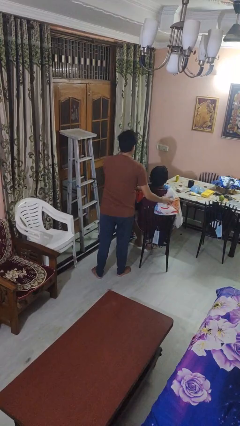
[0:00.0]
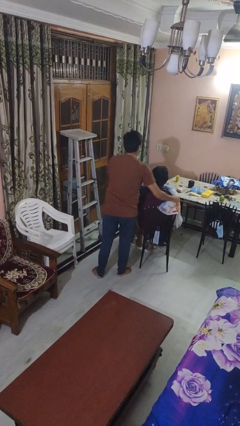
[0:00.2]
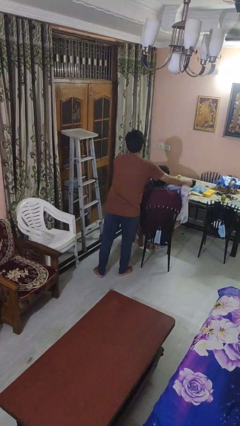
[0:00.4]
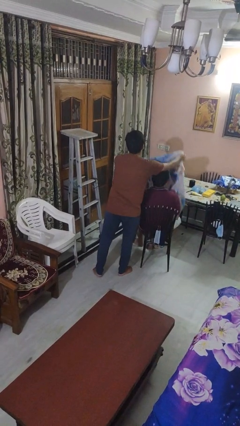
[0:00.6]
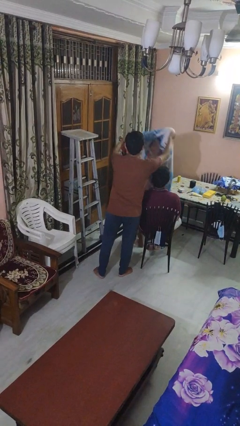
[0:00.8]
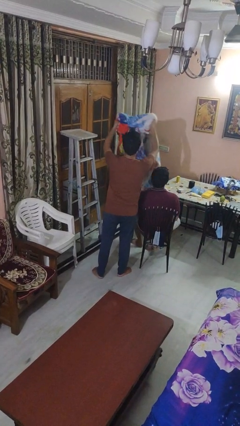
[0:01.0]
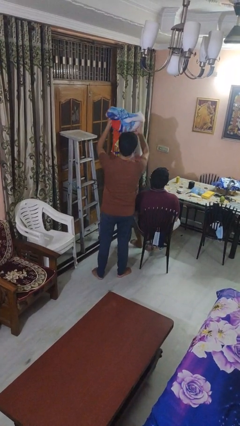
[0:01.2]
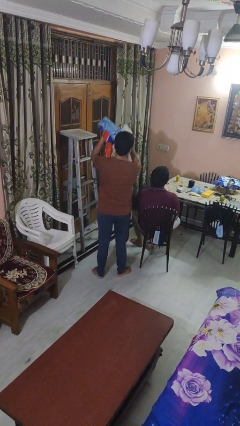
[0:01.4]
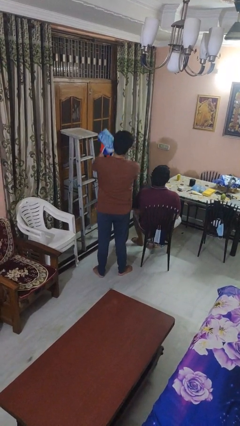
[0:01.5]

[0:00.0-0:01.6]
person uncovers friend with blanket

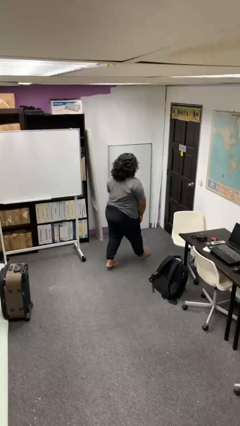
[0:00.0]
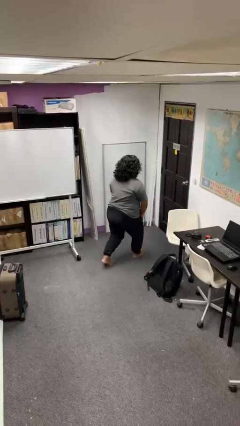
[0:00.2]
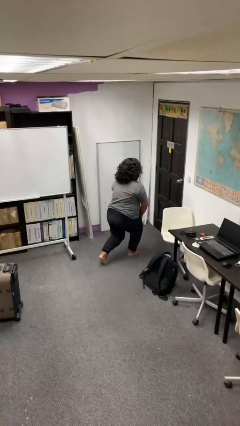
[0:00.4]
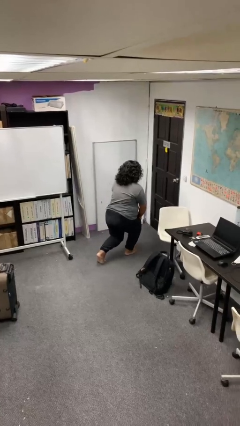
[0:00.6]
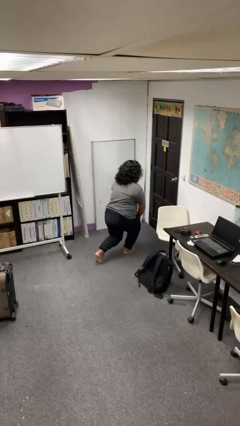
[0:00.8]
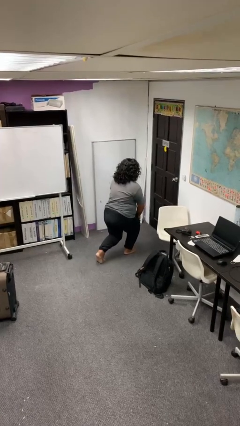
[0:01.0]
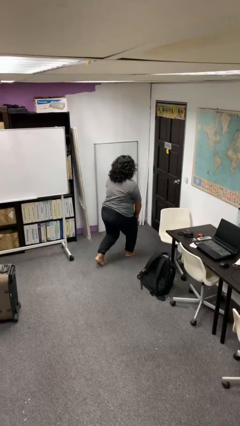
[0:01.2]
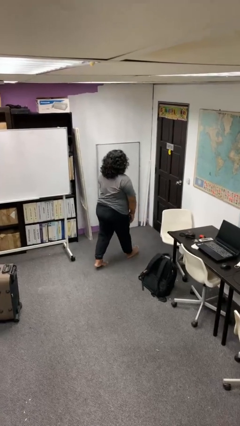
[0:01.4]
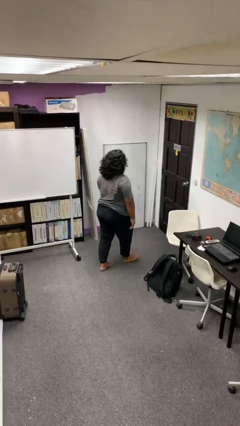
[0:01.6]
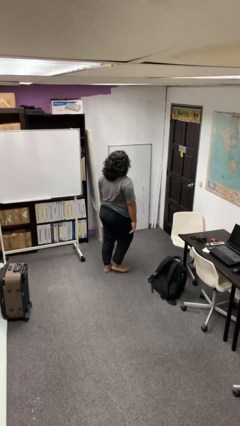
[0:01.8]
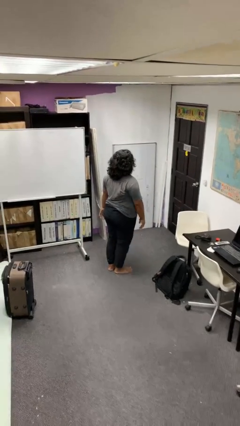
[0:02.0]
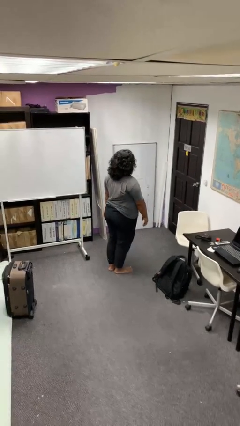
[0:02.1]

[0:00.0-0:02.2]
person exercises with lunges

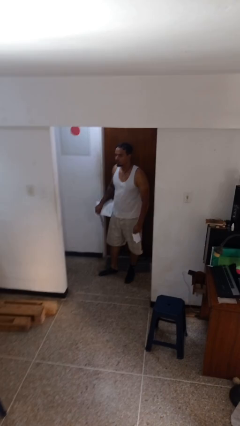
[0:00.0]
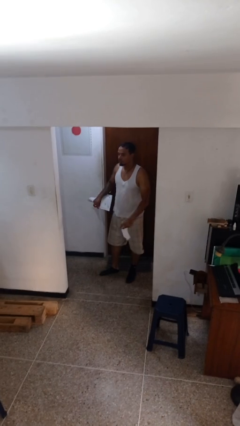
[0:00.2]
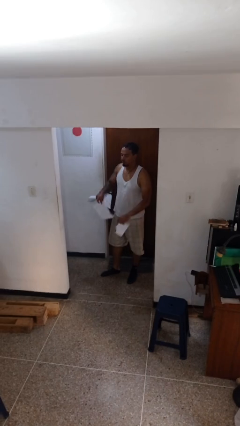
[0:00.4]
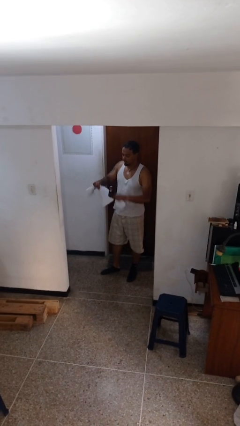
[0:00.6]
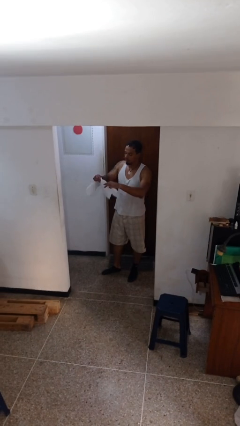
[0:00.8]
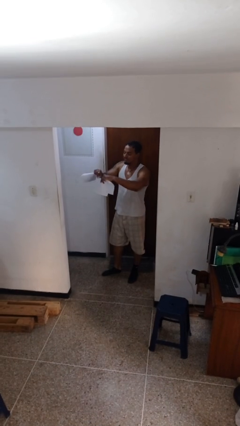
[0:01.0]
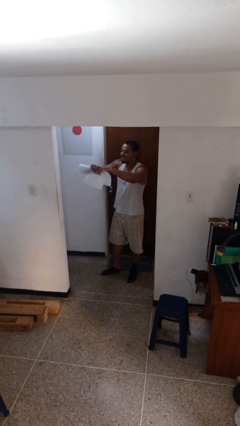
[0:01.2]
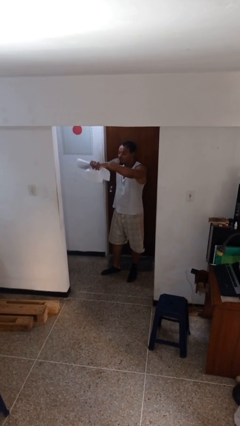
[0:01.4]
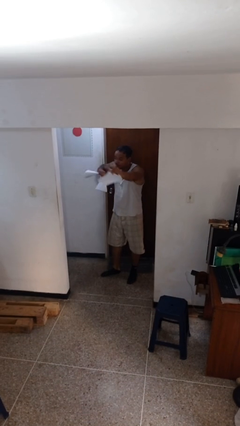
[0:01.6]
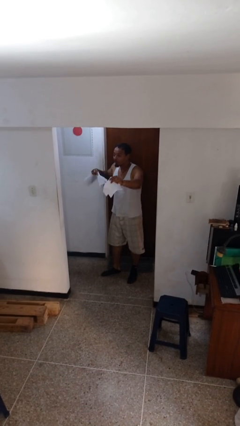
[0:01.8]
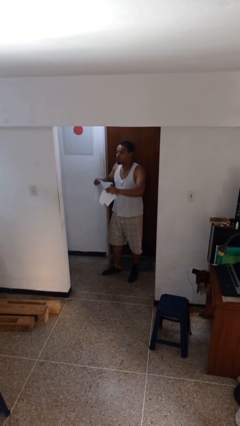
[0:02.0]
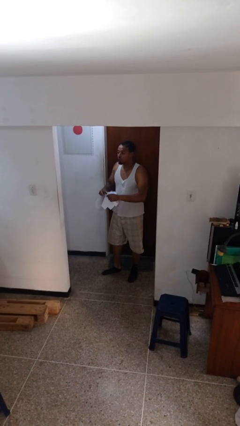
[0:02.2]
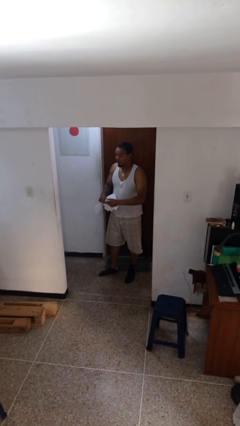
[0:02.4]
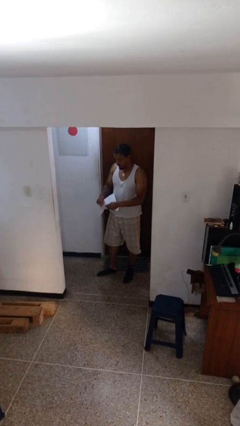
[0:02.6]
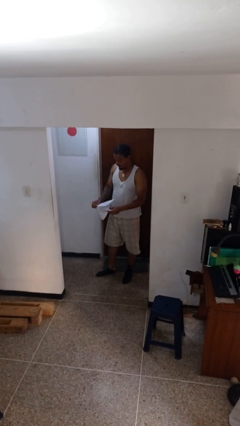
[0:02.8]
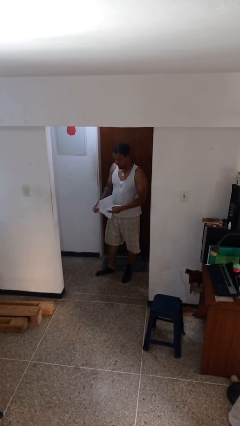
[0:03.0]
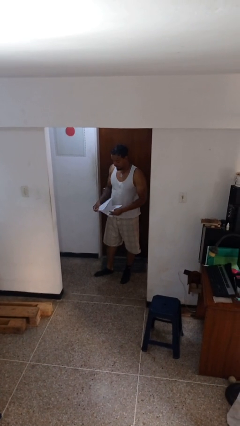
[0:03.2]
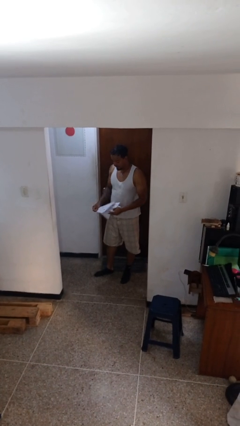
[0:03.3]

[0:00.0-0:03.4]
person tears paper

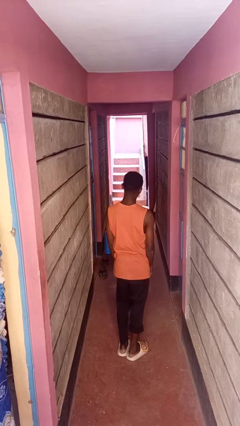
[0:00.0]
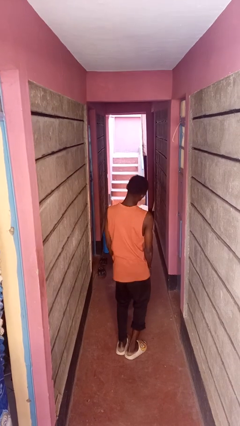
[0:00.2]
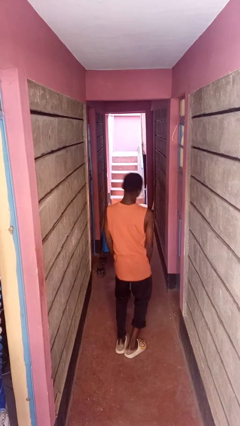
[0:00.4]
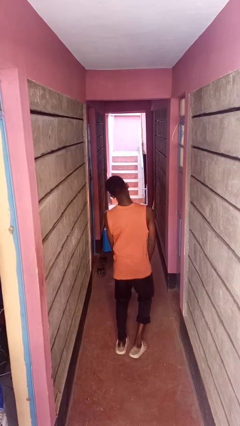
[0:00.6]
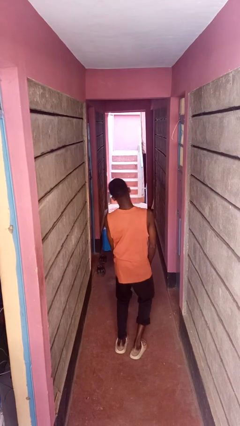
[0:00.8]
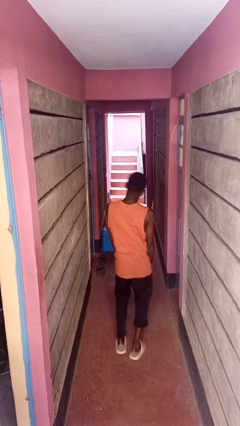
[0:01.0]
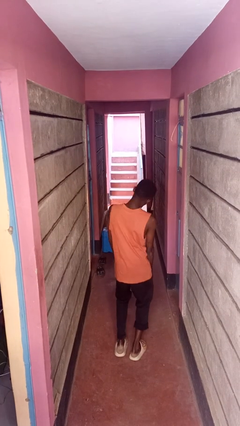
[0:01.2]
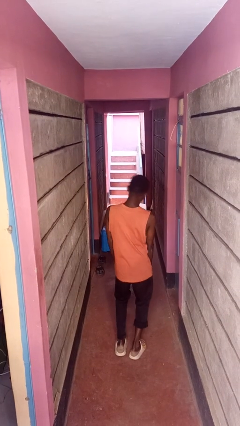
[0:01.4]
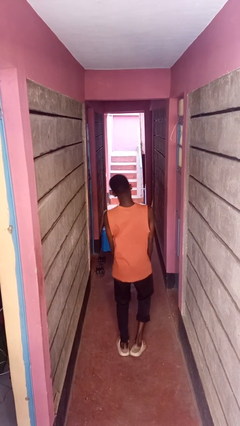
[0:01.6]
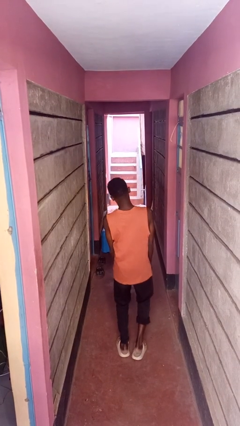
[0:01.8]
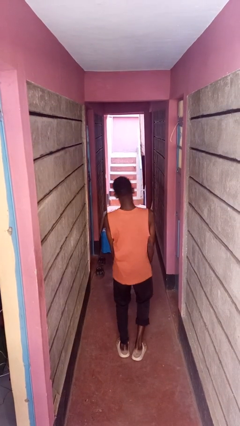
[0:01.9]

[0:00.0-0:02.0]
person dances in place

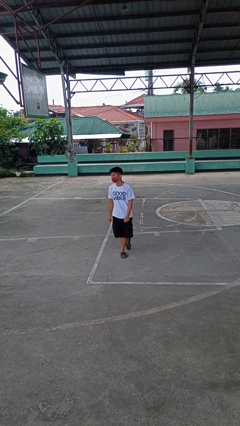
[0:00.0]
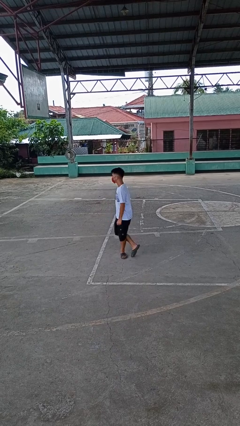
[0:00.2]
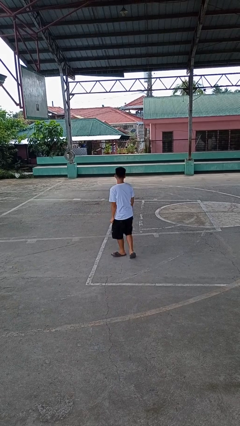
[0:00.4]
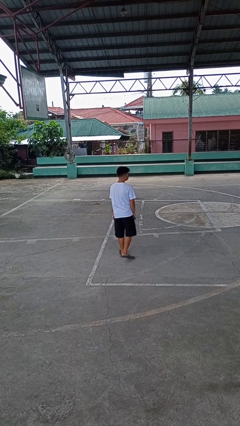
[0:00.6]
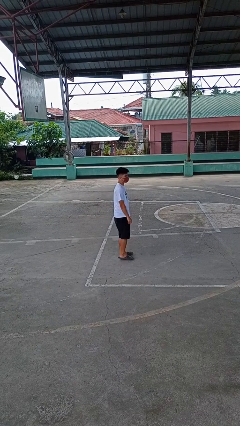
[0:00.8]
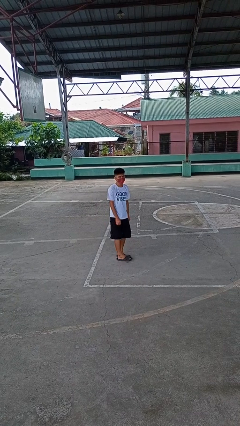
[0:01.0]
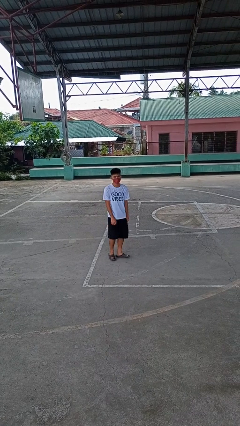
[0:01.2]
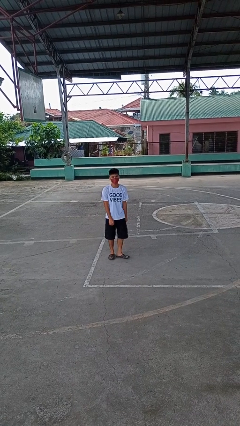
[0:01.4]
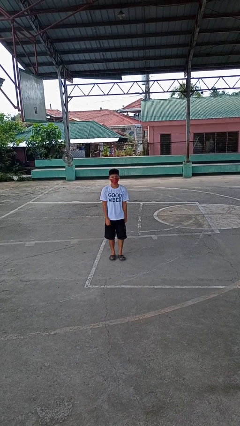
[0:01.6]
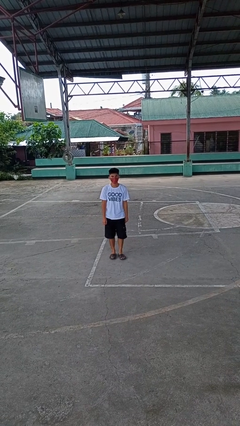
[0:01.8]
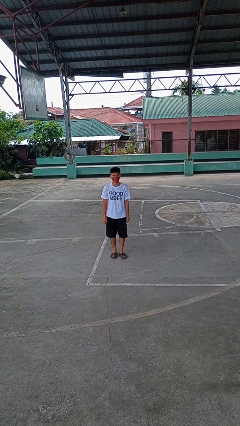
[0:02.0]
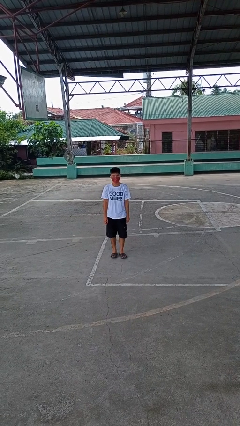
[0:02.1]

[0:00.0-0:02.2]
person twirls

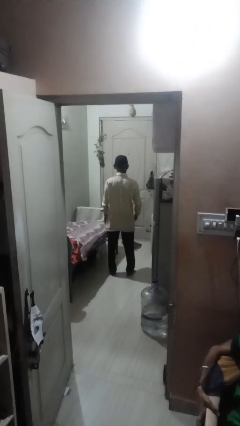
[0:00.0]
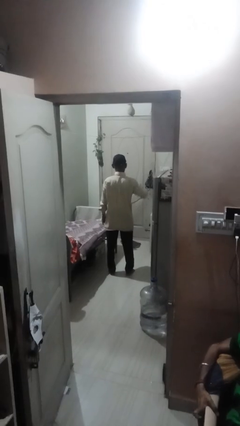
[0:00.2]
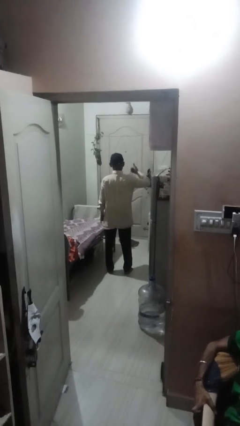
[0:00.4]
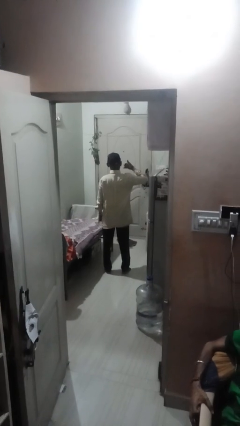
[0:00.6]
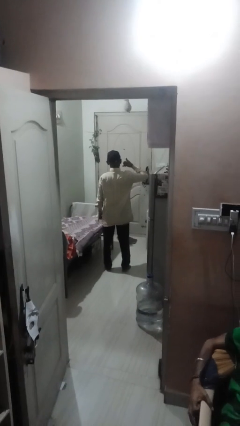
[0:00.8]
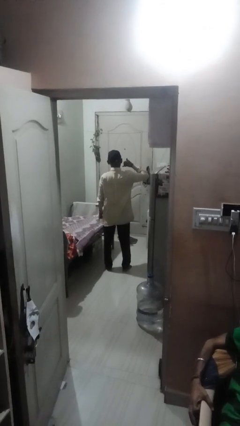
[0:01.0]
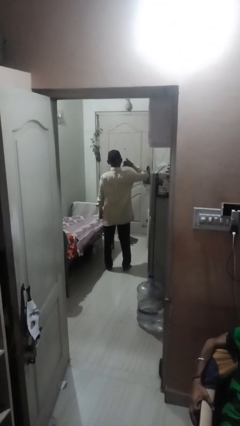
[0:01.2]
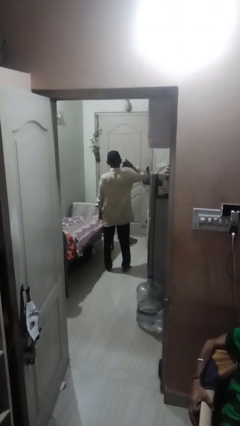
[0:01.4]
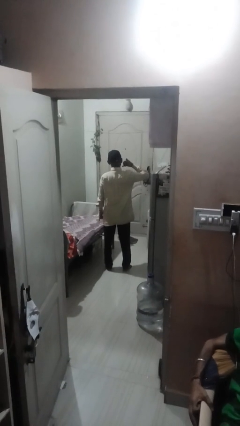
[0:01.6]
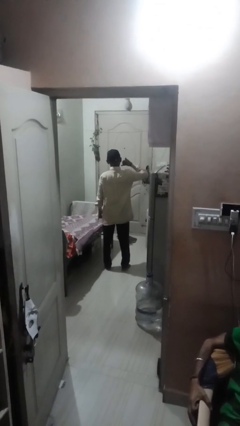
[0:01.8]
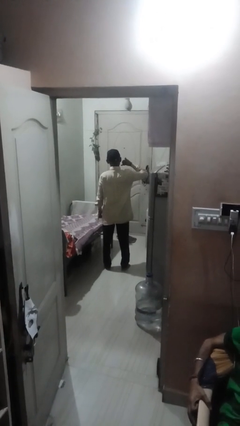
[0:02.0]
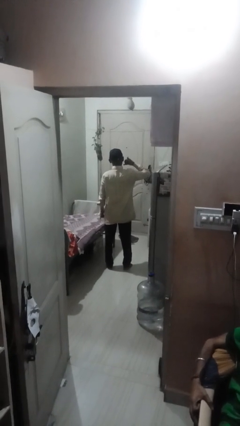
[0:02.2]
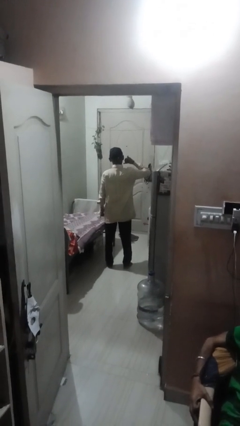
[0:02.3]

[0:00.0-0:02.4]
person gestures call me

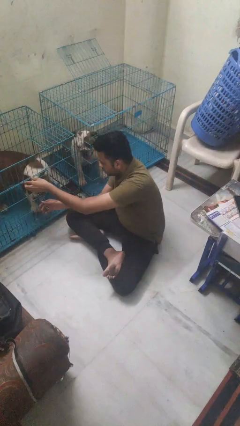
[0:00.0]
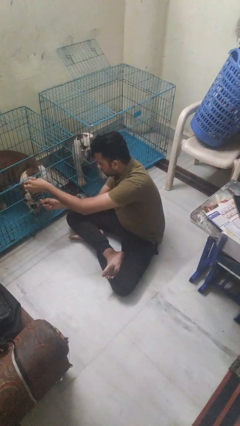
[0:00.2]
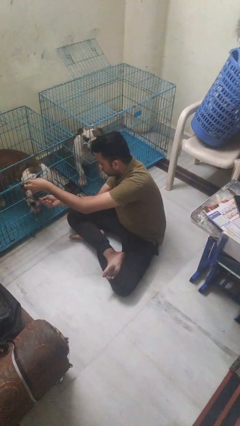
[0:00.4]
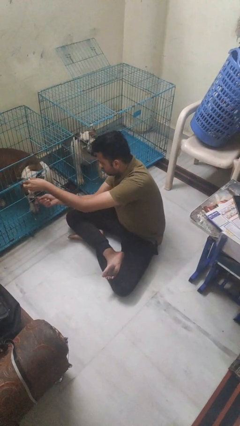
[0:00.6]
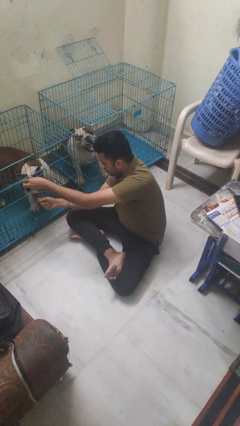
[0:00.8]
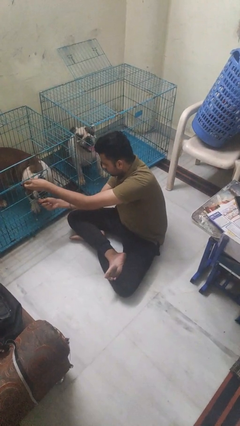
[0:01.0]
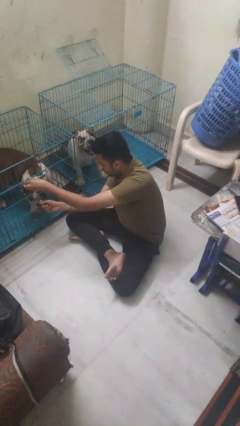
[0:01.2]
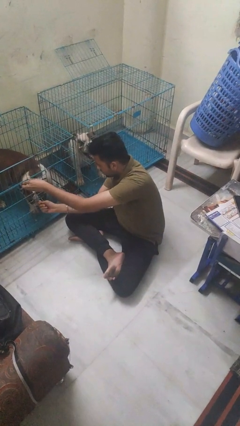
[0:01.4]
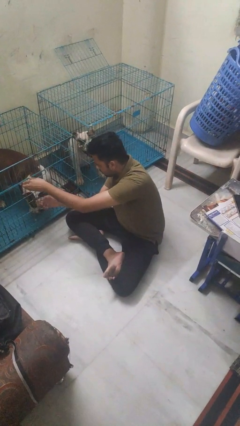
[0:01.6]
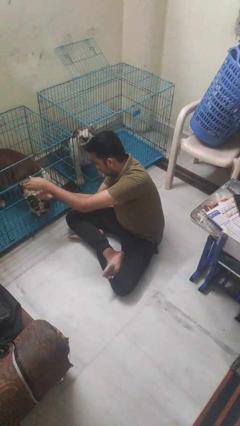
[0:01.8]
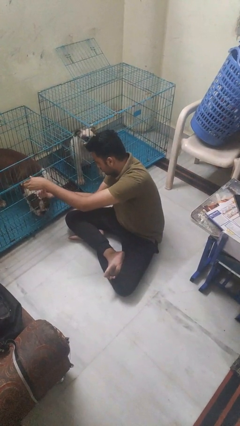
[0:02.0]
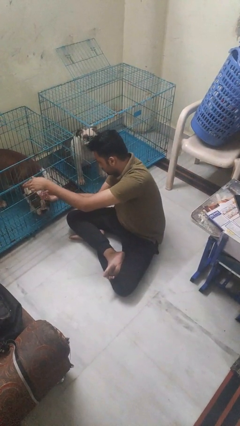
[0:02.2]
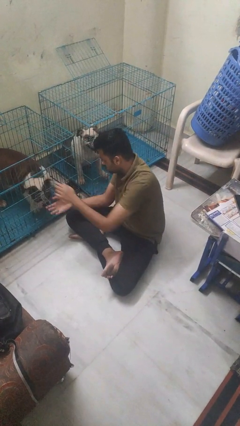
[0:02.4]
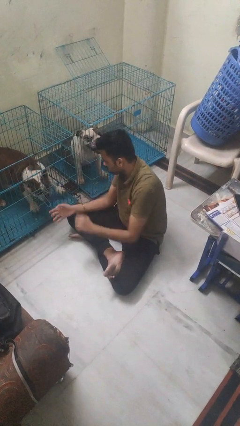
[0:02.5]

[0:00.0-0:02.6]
person crates dog

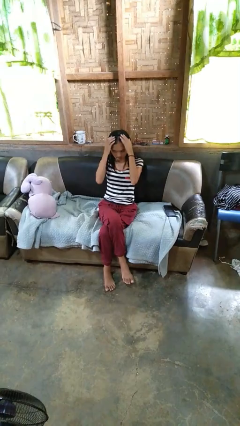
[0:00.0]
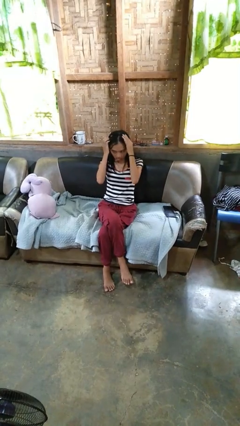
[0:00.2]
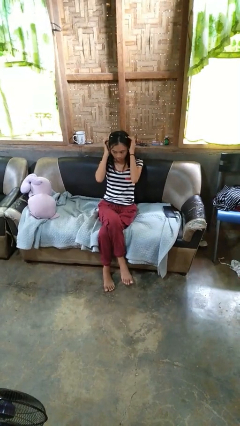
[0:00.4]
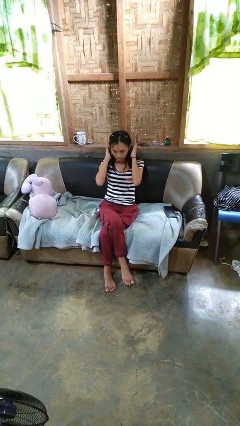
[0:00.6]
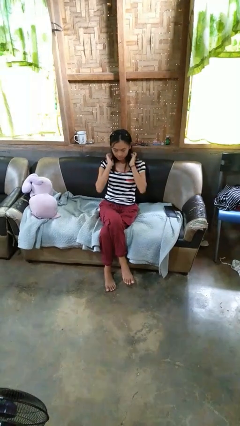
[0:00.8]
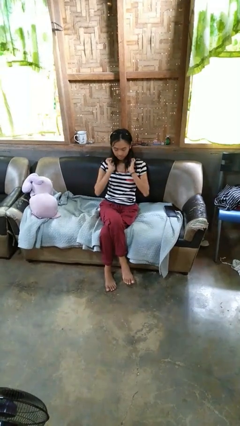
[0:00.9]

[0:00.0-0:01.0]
person strokes hair
